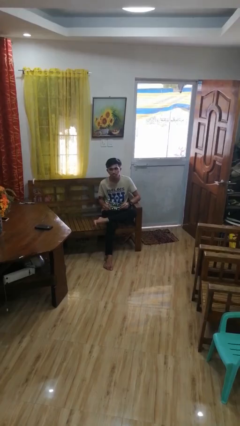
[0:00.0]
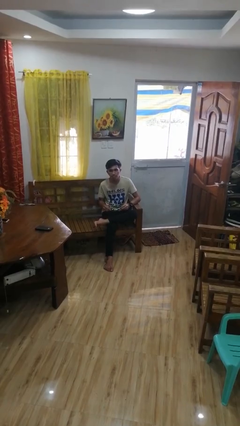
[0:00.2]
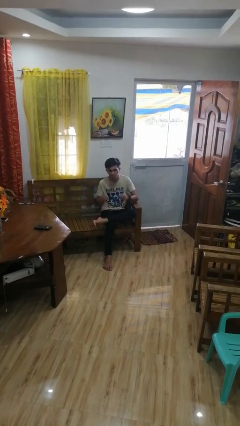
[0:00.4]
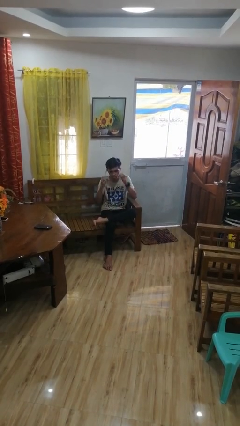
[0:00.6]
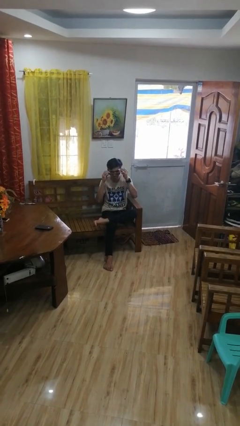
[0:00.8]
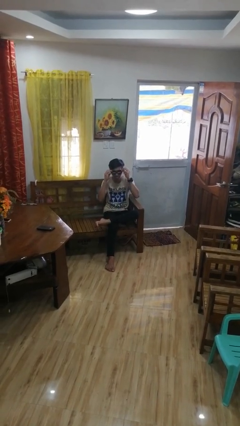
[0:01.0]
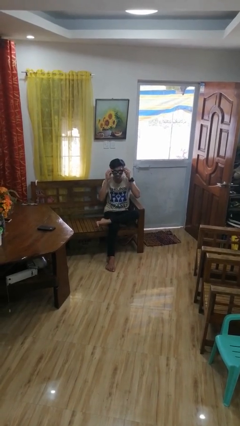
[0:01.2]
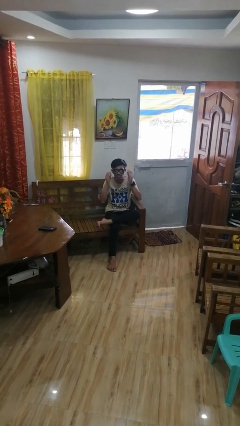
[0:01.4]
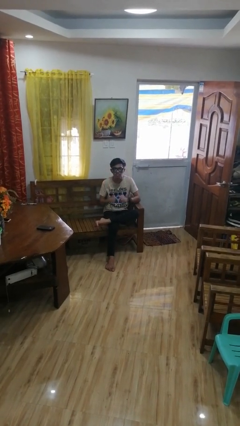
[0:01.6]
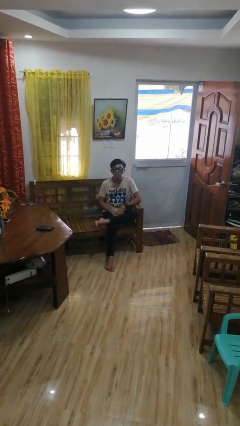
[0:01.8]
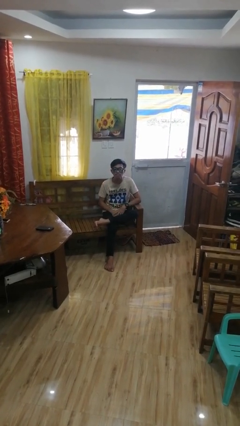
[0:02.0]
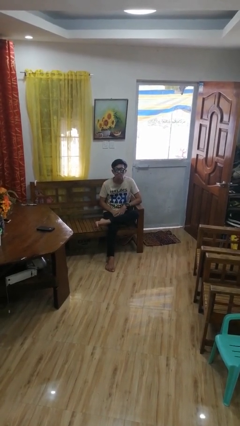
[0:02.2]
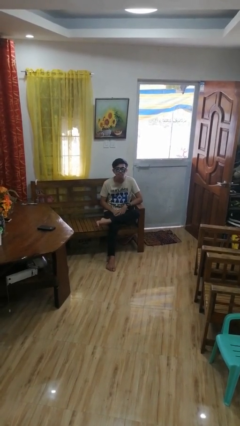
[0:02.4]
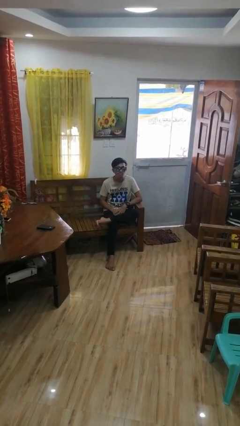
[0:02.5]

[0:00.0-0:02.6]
person puts on sunglasses

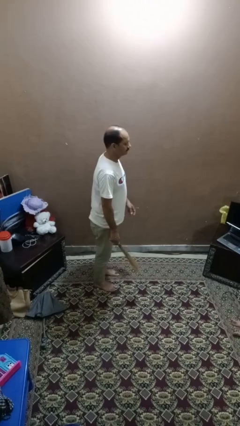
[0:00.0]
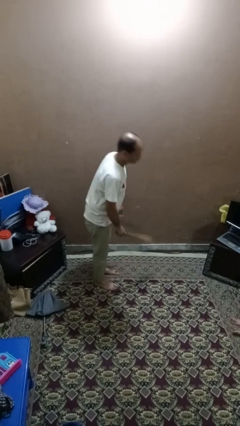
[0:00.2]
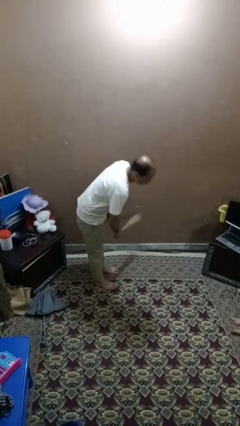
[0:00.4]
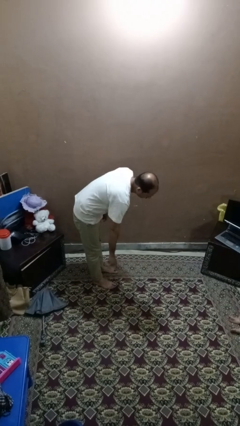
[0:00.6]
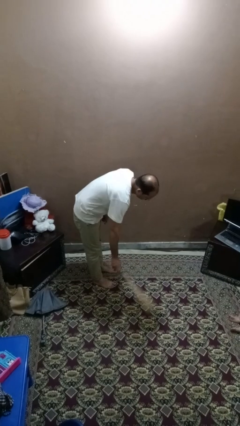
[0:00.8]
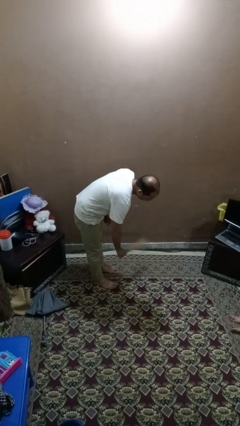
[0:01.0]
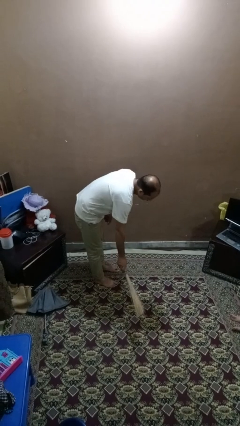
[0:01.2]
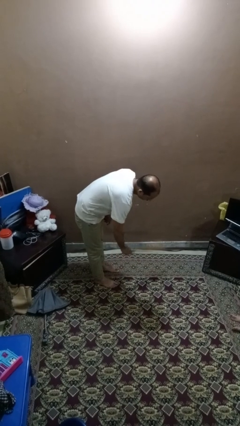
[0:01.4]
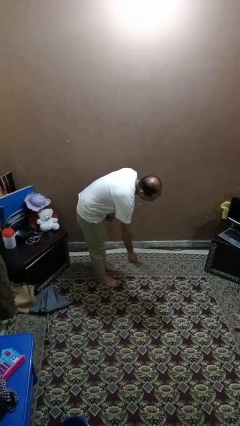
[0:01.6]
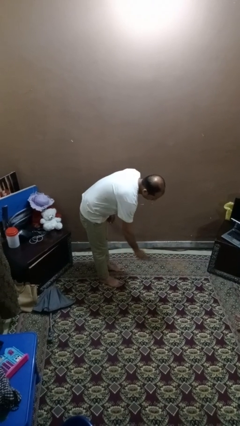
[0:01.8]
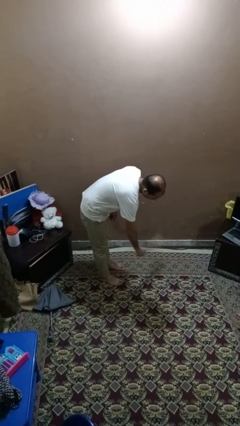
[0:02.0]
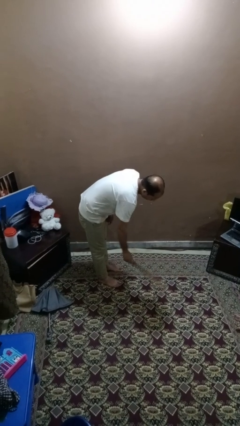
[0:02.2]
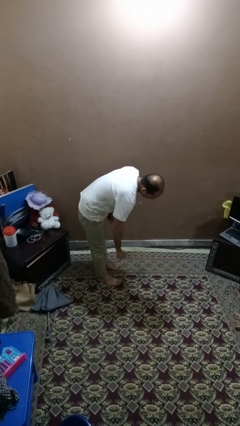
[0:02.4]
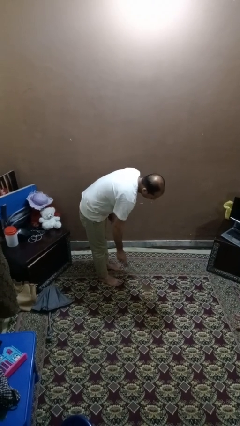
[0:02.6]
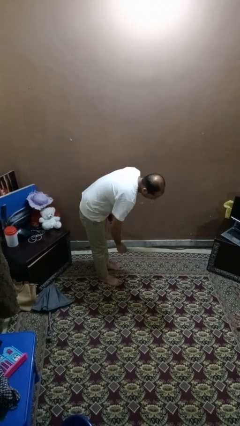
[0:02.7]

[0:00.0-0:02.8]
person sweeps floor

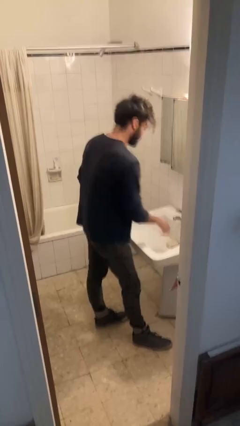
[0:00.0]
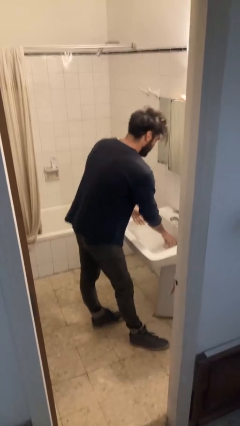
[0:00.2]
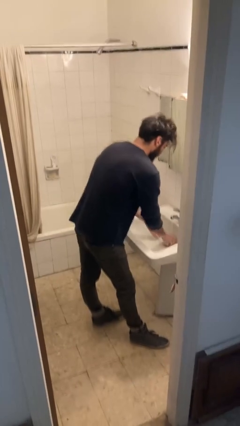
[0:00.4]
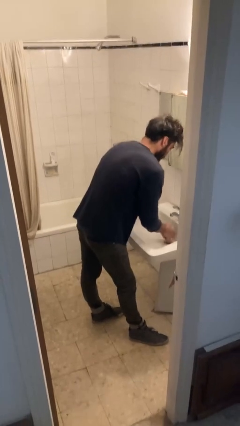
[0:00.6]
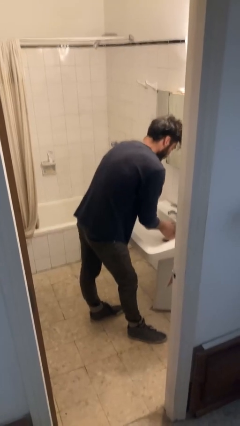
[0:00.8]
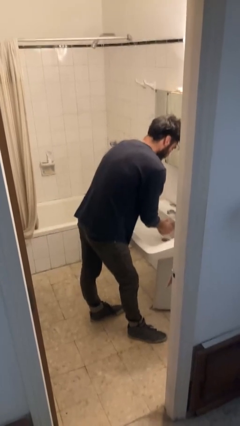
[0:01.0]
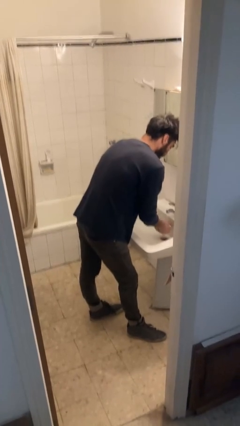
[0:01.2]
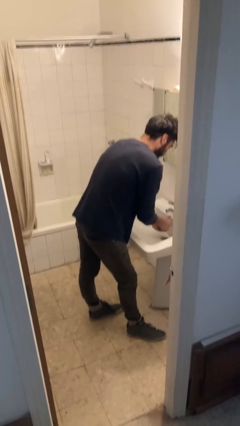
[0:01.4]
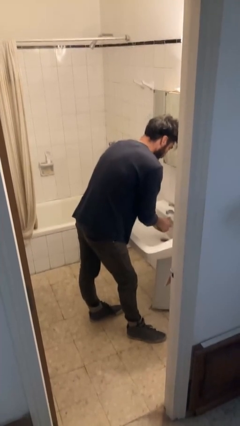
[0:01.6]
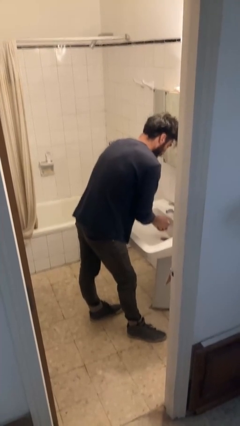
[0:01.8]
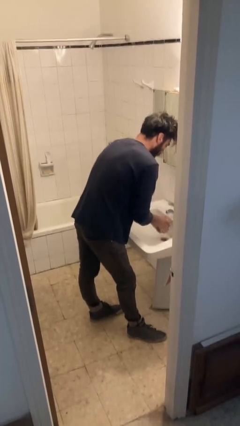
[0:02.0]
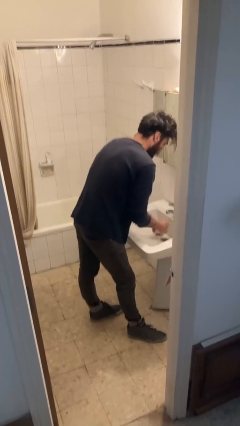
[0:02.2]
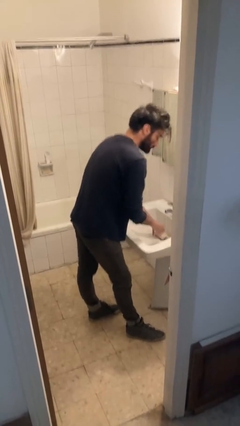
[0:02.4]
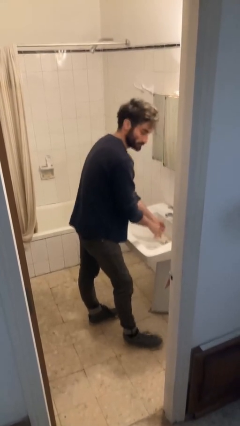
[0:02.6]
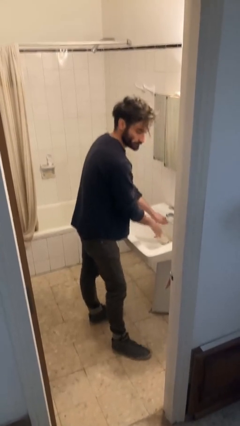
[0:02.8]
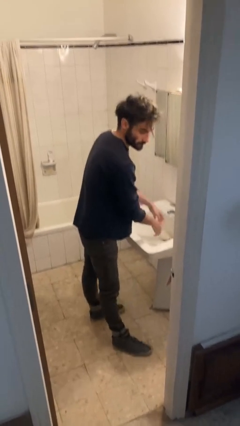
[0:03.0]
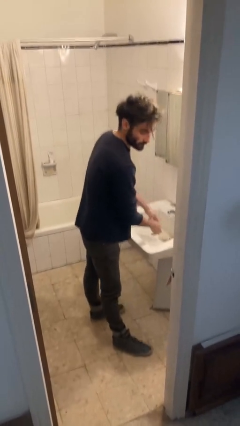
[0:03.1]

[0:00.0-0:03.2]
person washes hands

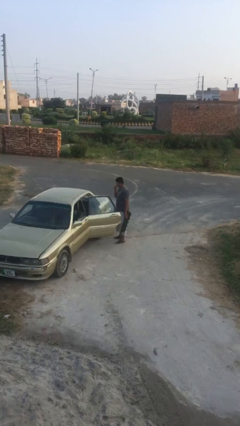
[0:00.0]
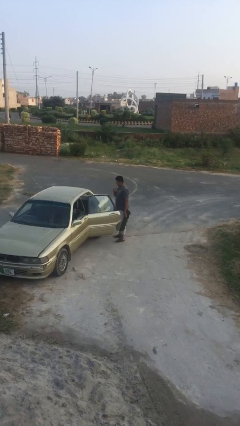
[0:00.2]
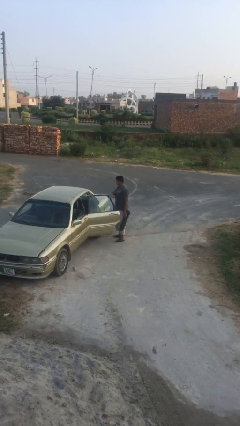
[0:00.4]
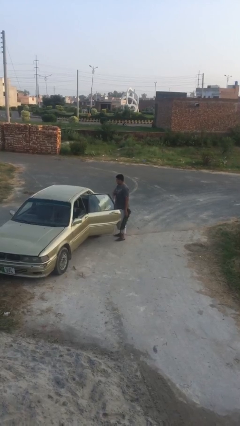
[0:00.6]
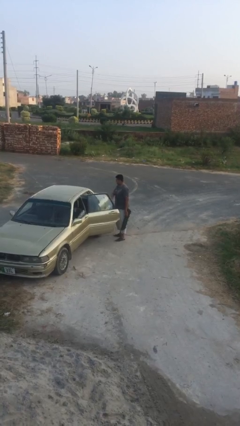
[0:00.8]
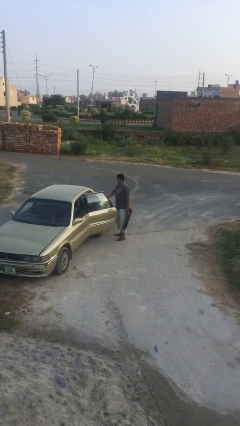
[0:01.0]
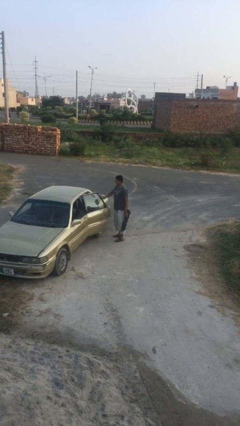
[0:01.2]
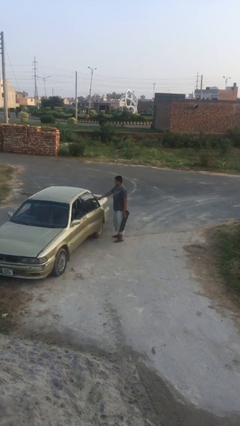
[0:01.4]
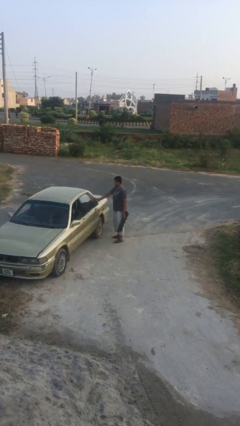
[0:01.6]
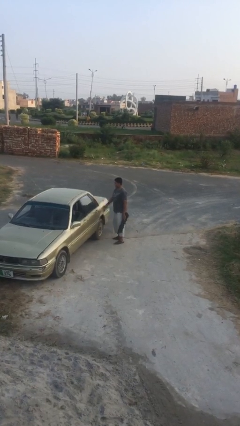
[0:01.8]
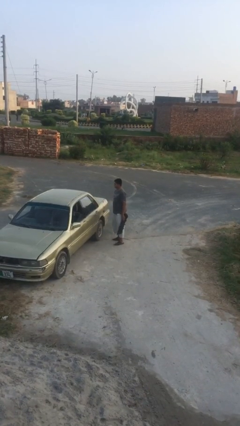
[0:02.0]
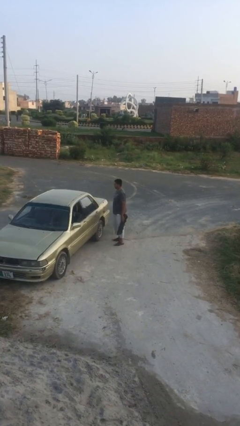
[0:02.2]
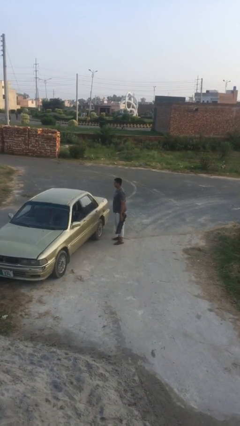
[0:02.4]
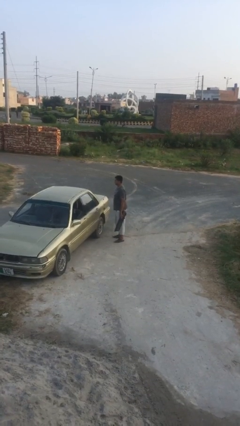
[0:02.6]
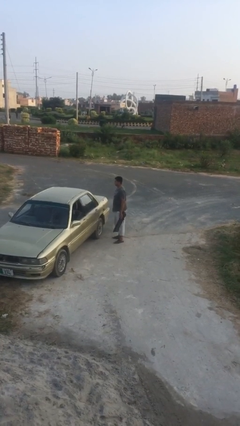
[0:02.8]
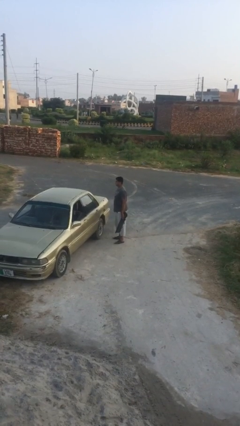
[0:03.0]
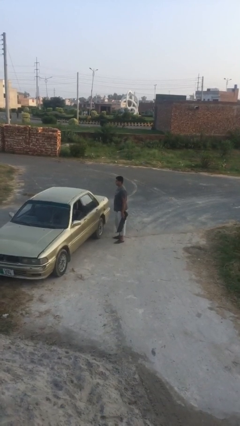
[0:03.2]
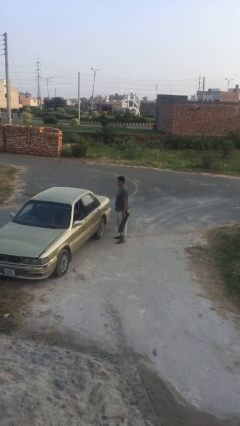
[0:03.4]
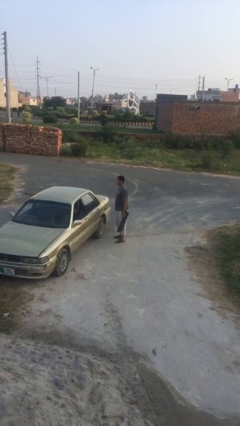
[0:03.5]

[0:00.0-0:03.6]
person closes car door

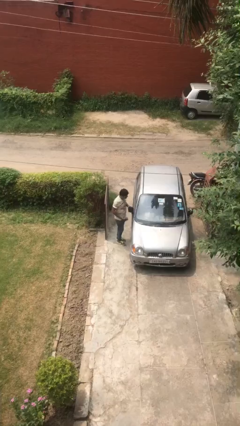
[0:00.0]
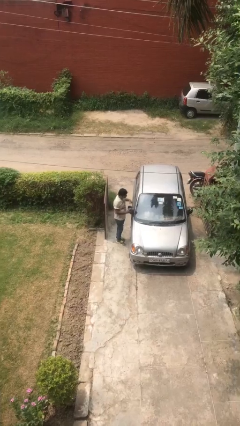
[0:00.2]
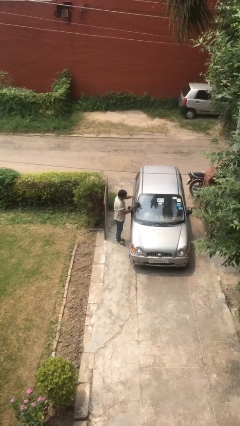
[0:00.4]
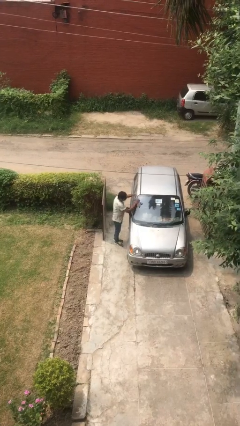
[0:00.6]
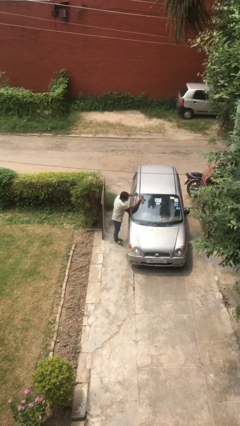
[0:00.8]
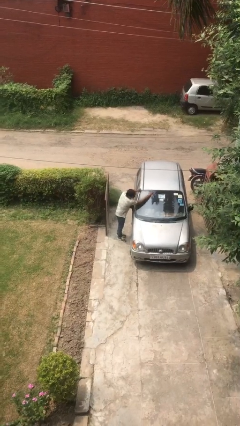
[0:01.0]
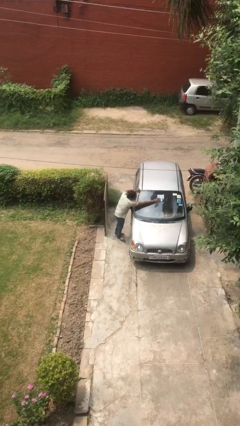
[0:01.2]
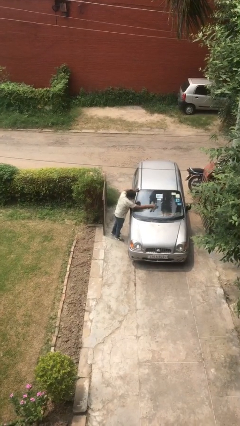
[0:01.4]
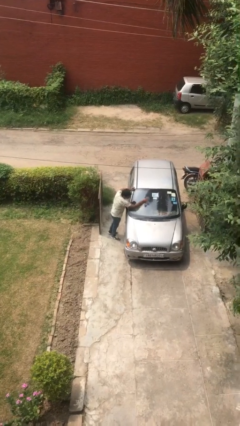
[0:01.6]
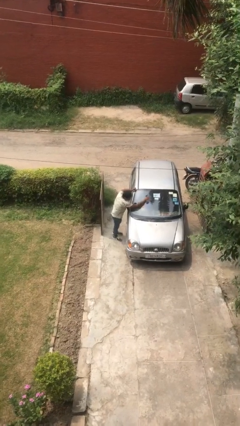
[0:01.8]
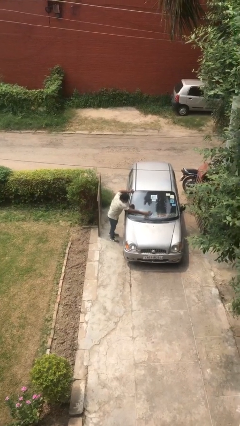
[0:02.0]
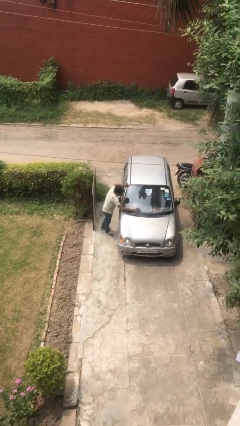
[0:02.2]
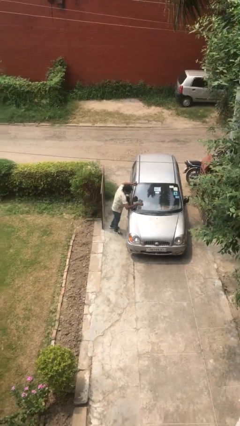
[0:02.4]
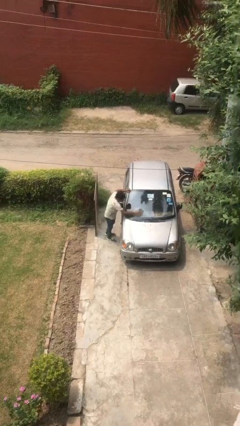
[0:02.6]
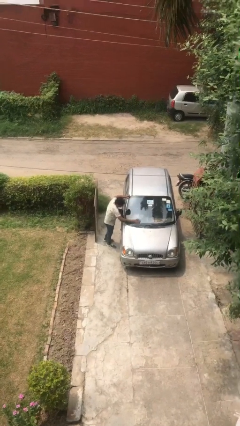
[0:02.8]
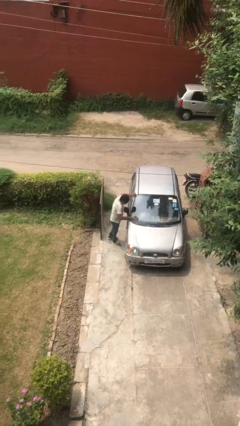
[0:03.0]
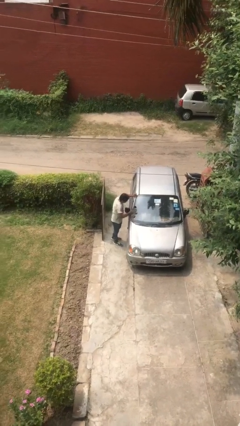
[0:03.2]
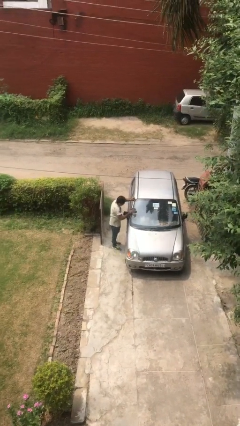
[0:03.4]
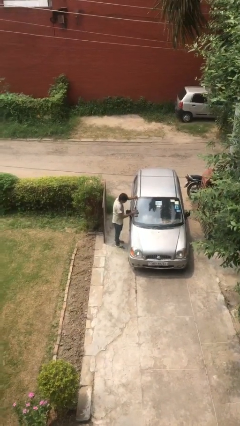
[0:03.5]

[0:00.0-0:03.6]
person polishes car with rag

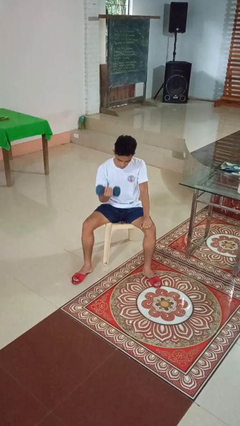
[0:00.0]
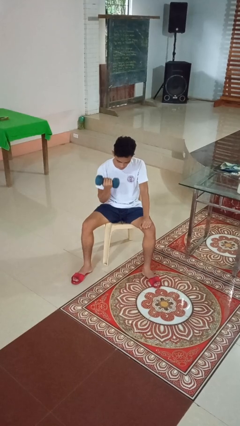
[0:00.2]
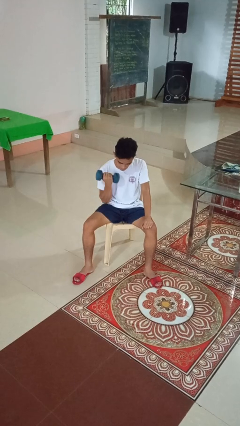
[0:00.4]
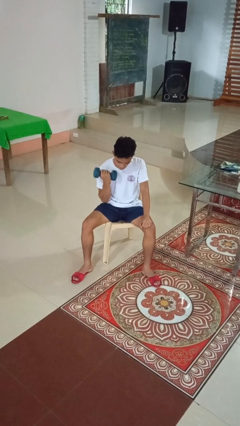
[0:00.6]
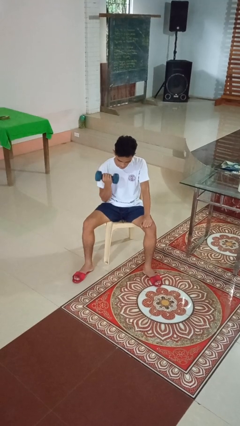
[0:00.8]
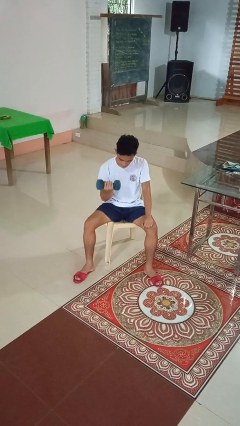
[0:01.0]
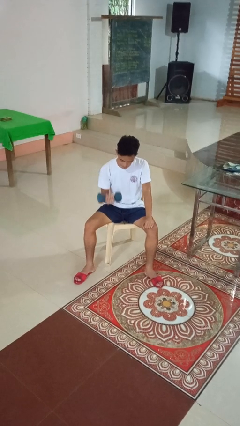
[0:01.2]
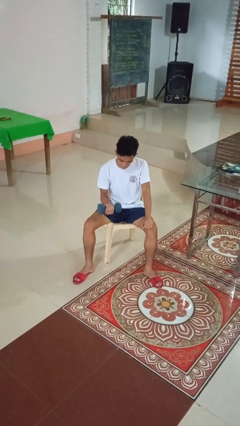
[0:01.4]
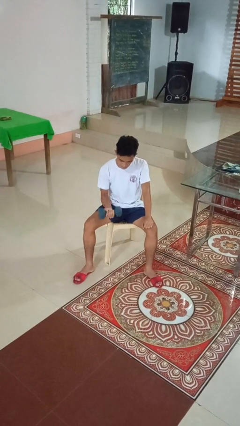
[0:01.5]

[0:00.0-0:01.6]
person lifts dumbbells
